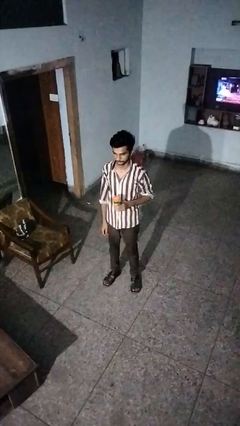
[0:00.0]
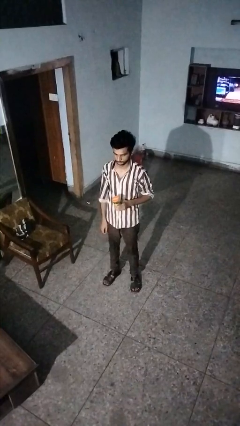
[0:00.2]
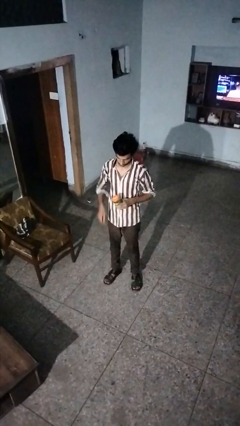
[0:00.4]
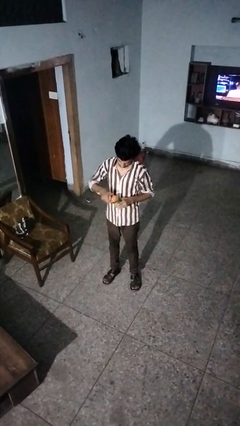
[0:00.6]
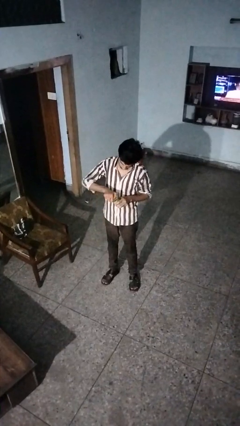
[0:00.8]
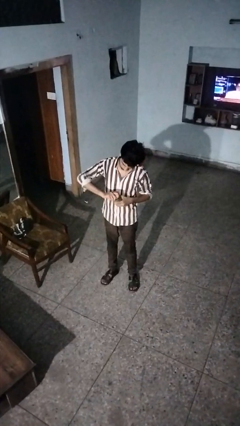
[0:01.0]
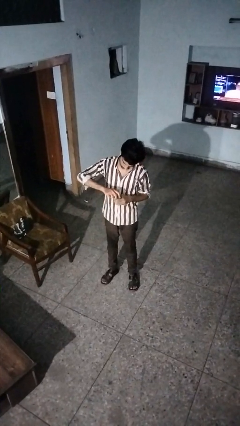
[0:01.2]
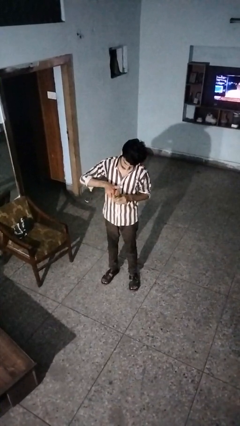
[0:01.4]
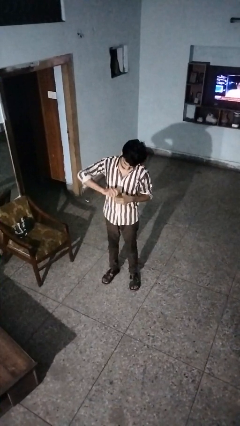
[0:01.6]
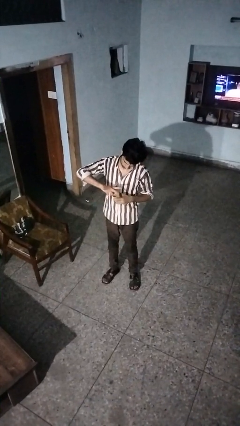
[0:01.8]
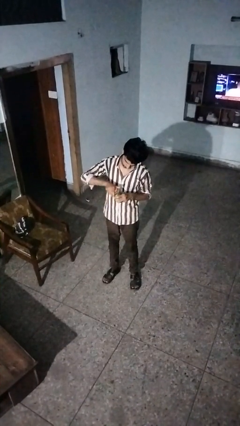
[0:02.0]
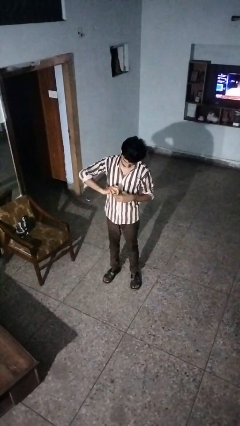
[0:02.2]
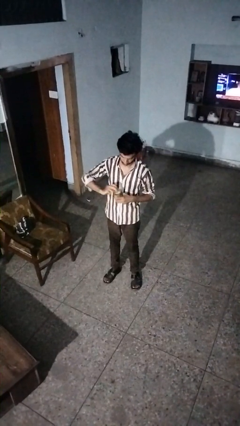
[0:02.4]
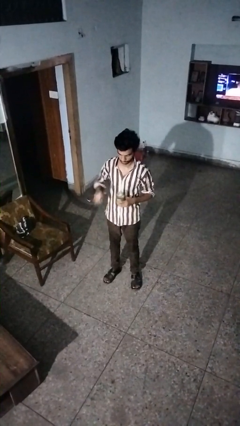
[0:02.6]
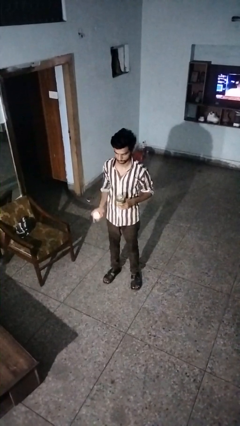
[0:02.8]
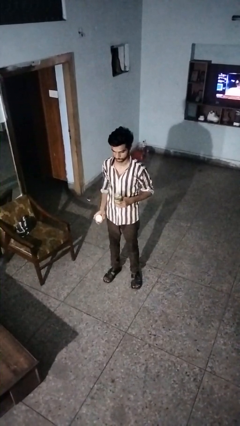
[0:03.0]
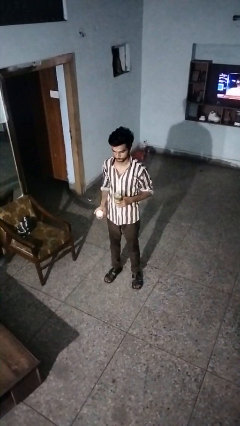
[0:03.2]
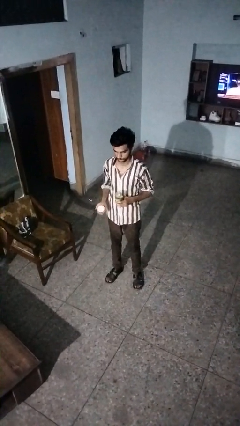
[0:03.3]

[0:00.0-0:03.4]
person opens jar

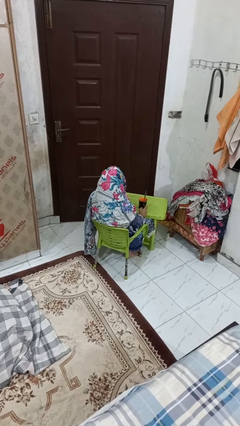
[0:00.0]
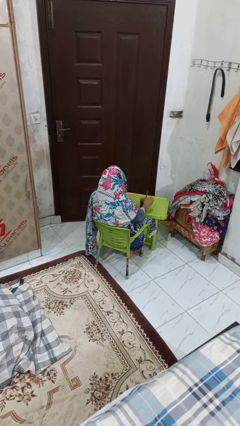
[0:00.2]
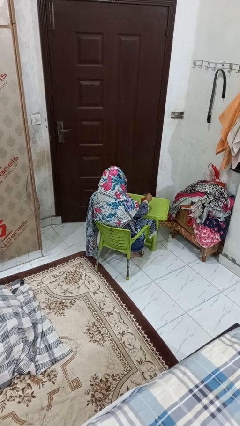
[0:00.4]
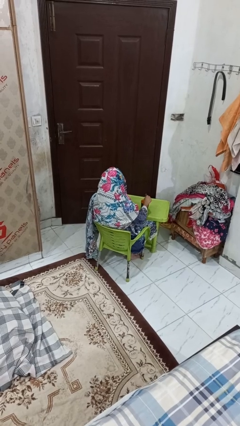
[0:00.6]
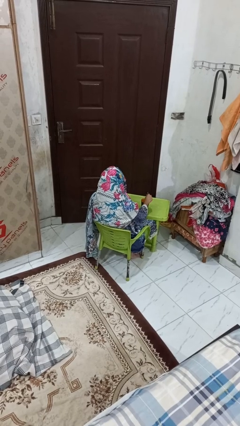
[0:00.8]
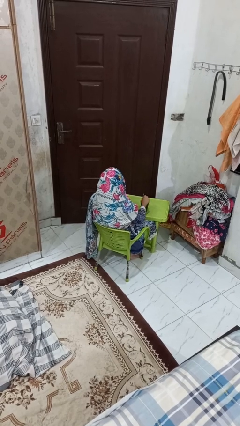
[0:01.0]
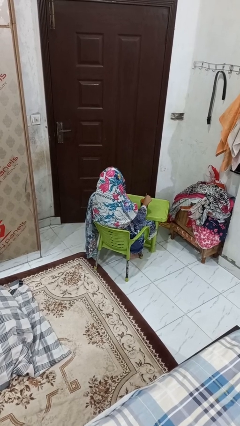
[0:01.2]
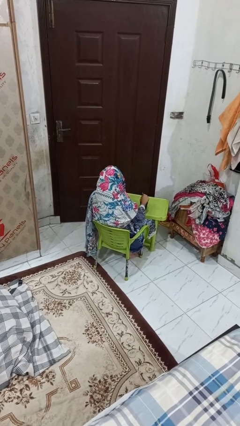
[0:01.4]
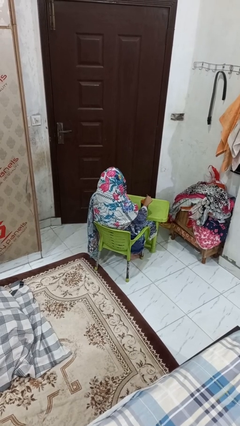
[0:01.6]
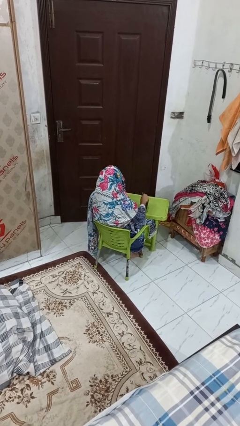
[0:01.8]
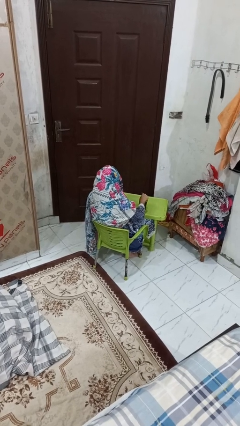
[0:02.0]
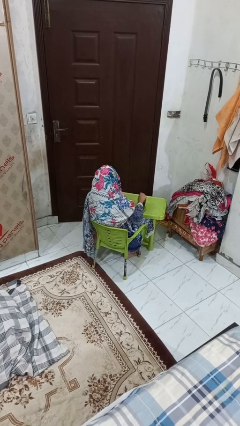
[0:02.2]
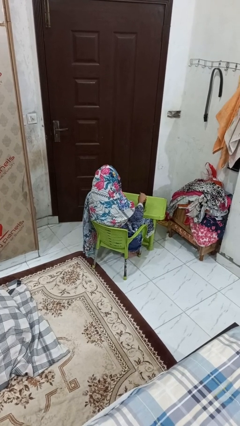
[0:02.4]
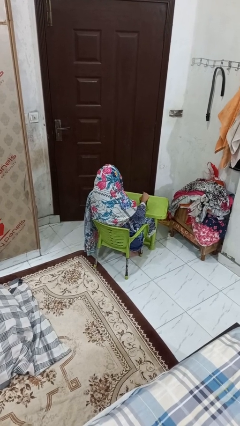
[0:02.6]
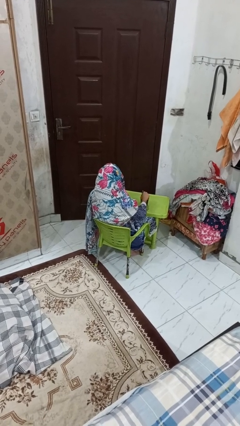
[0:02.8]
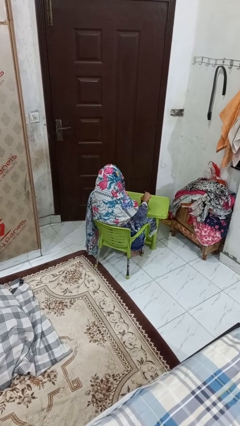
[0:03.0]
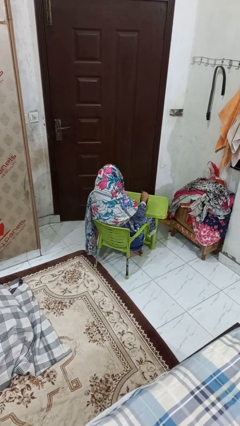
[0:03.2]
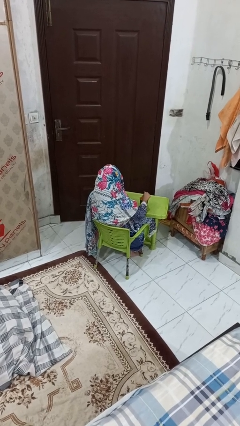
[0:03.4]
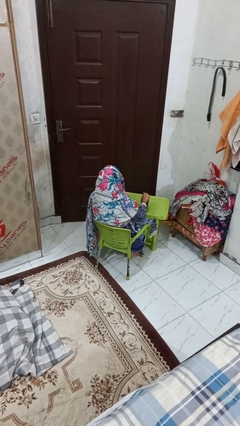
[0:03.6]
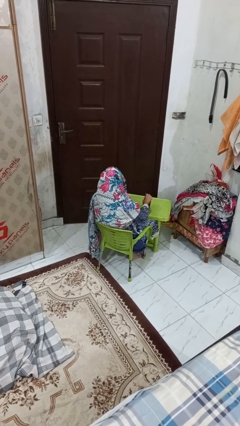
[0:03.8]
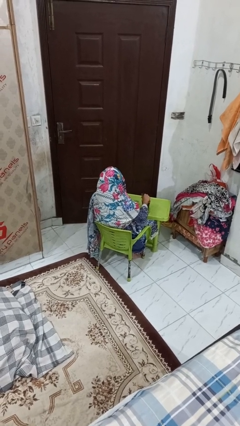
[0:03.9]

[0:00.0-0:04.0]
person stirs mug

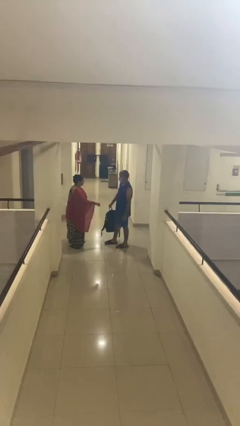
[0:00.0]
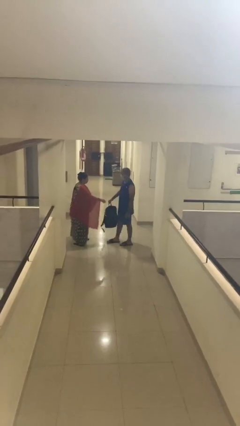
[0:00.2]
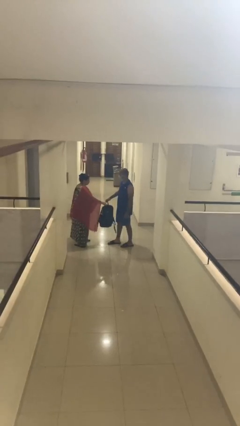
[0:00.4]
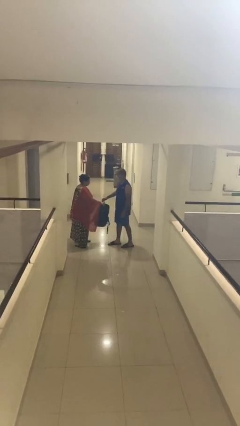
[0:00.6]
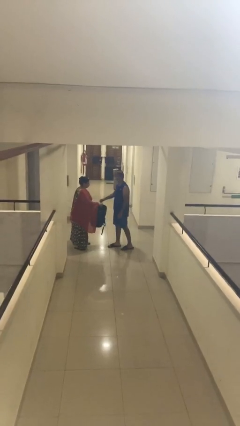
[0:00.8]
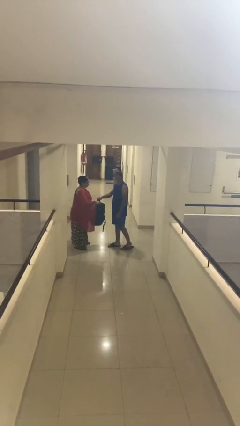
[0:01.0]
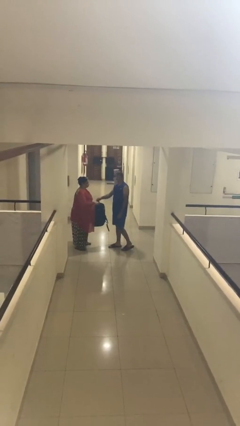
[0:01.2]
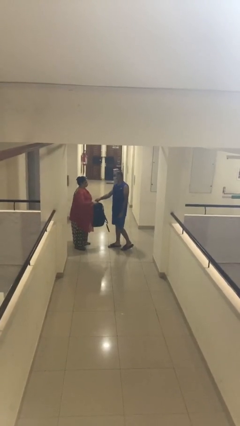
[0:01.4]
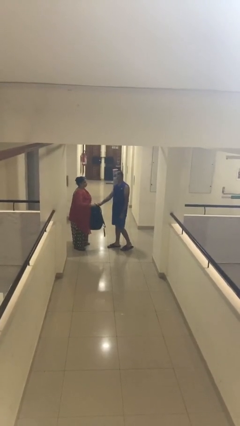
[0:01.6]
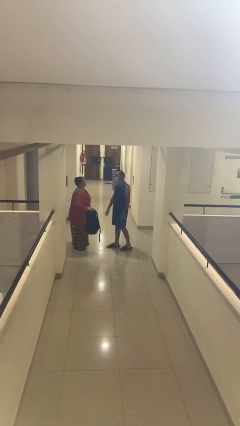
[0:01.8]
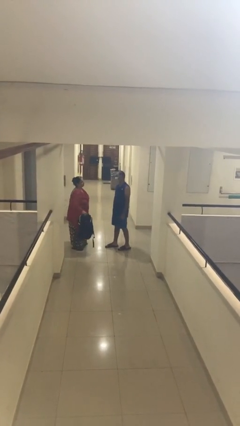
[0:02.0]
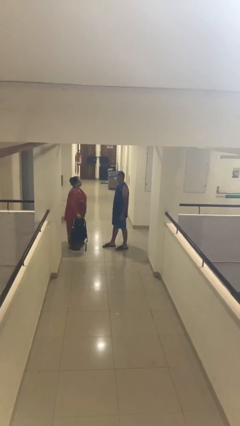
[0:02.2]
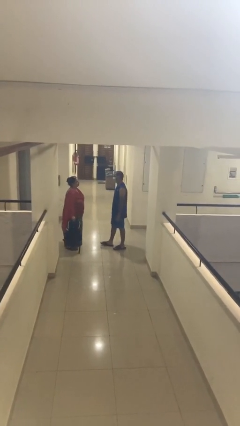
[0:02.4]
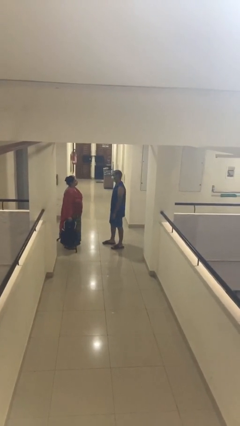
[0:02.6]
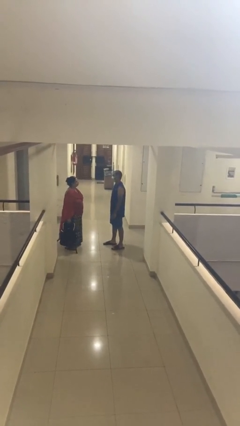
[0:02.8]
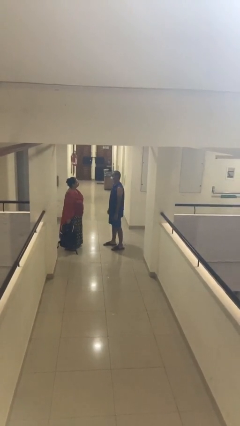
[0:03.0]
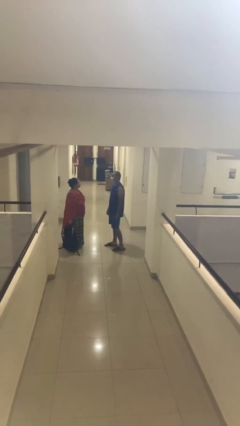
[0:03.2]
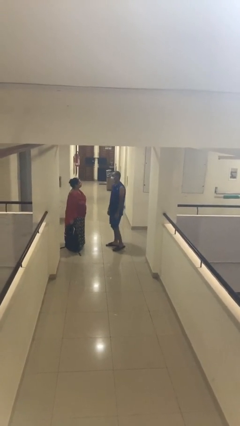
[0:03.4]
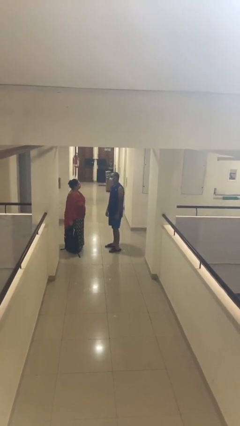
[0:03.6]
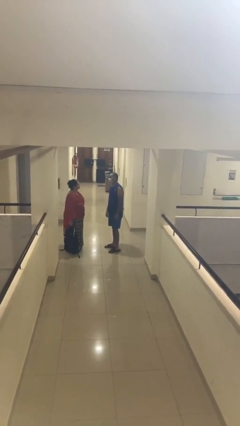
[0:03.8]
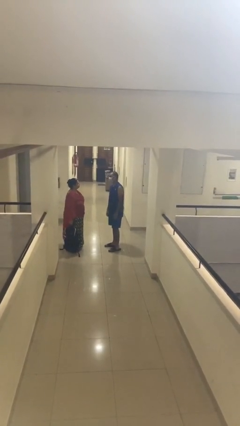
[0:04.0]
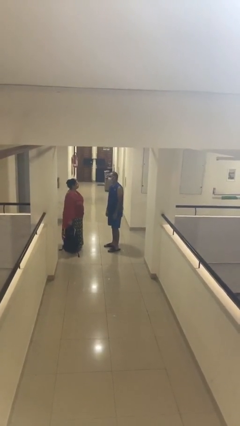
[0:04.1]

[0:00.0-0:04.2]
person transfers object to person

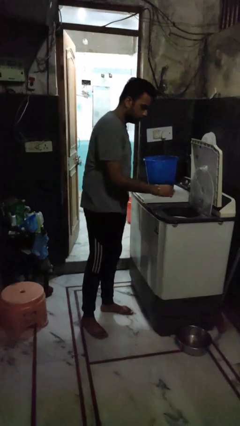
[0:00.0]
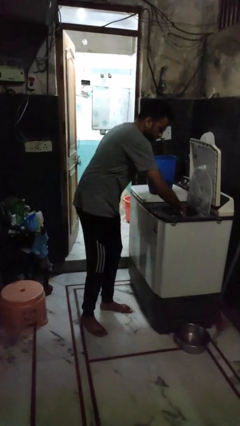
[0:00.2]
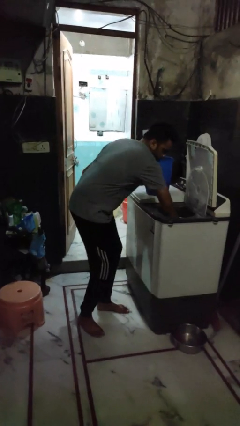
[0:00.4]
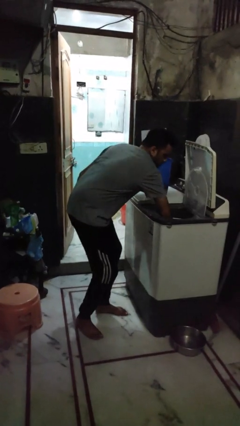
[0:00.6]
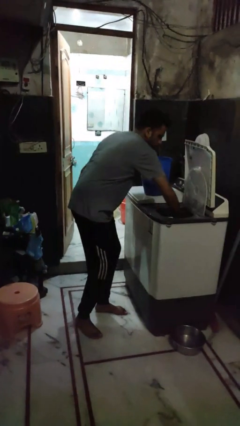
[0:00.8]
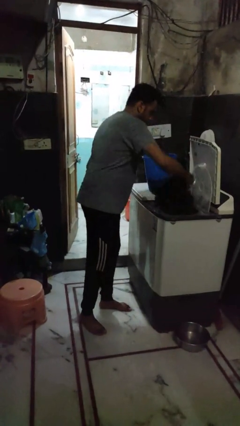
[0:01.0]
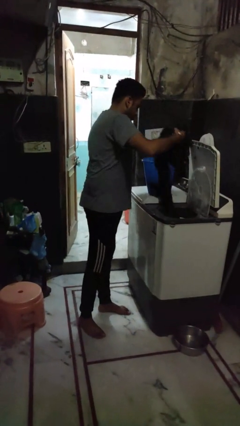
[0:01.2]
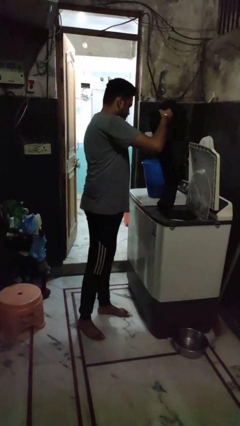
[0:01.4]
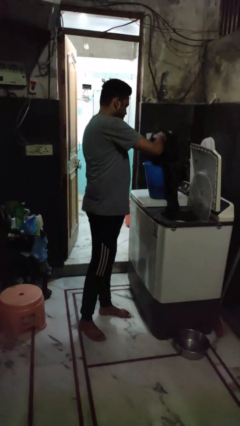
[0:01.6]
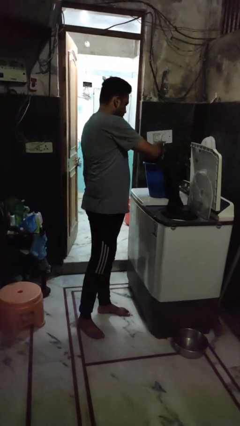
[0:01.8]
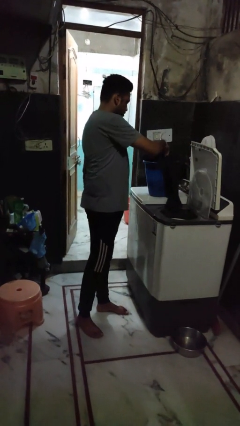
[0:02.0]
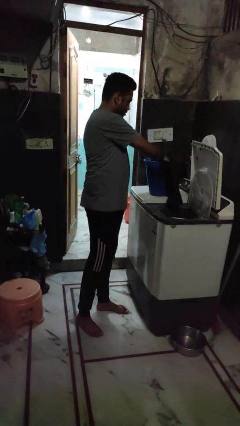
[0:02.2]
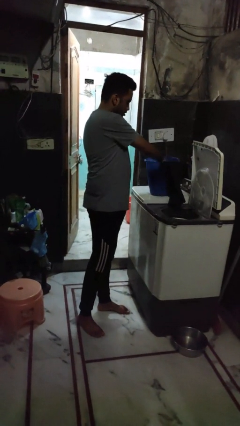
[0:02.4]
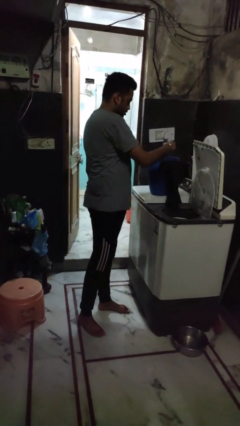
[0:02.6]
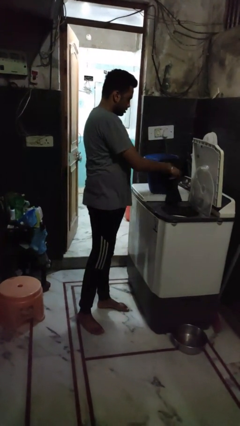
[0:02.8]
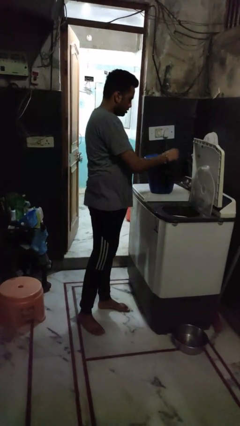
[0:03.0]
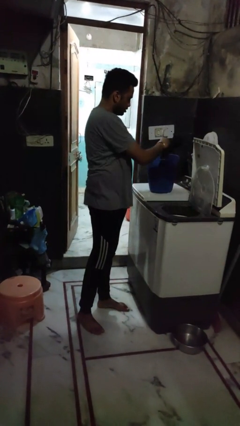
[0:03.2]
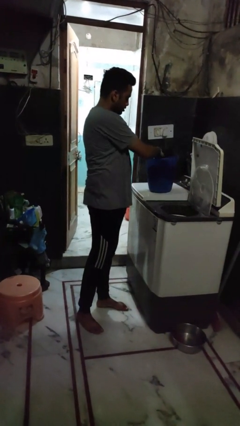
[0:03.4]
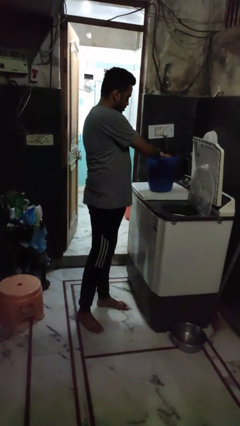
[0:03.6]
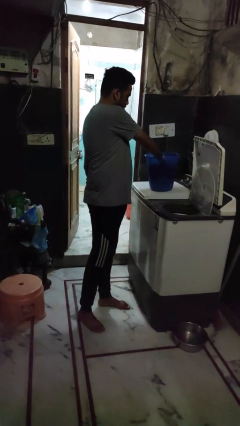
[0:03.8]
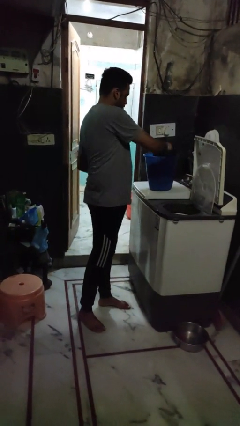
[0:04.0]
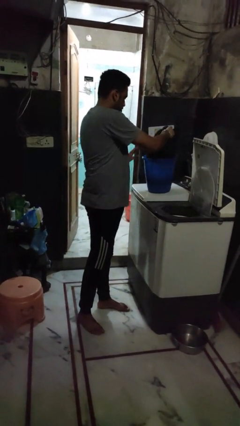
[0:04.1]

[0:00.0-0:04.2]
person unloads dryer

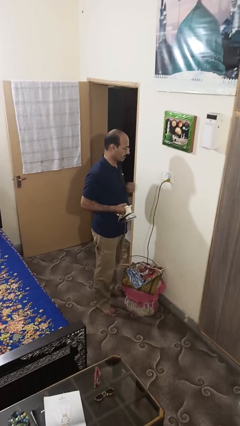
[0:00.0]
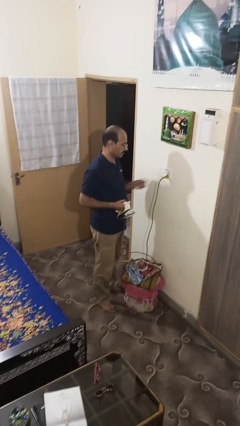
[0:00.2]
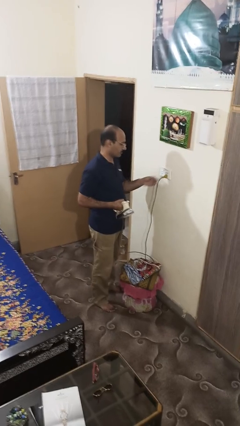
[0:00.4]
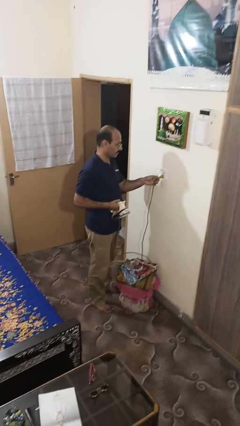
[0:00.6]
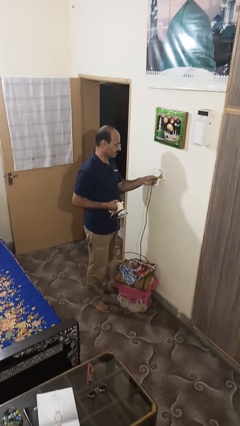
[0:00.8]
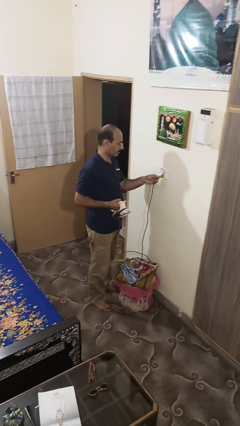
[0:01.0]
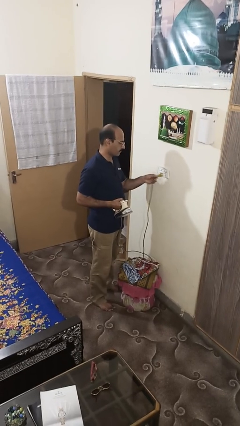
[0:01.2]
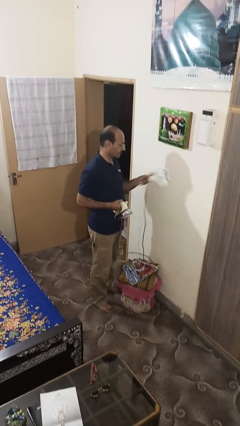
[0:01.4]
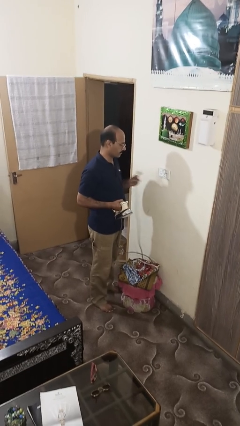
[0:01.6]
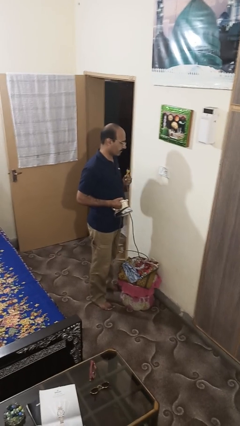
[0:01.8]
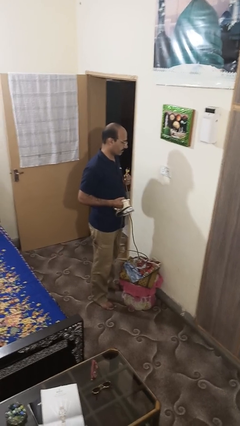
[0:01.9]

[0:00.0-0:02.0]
person unplugs from electrical socket
